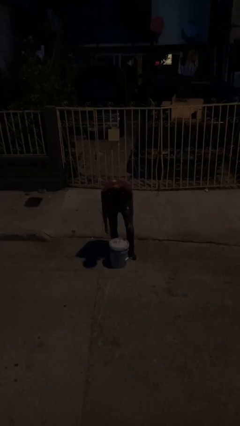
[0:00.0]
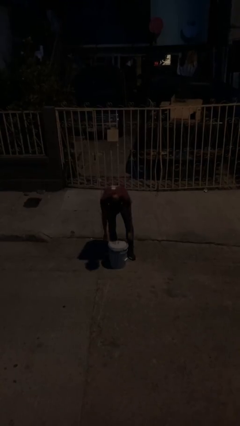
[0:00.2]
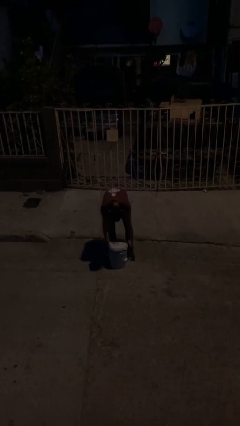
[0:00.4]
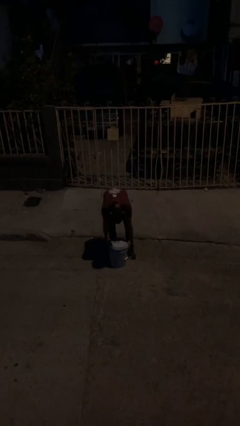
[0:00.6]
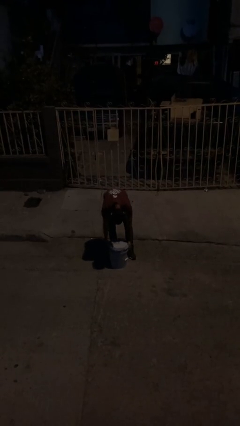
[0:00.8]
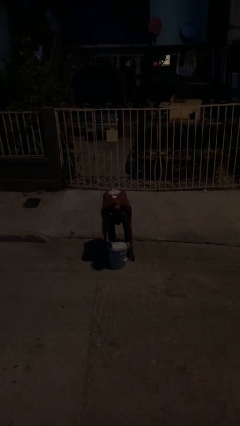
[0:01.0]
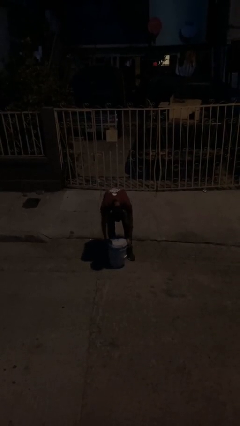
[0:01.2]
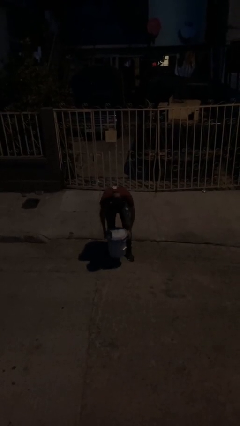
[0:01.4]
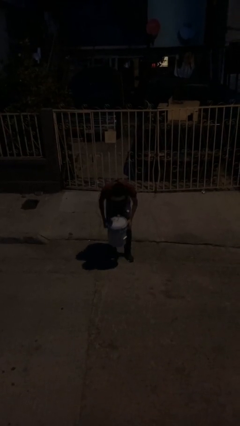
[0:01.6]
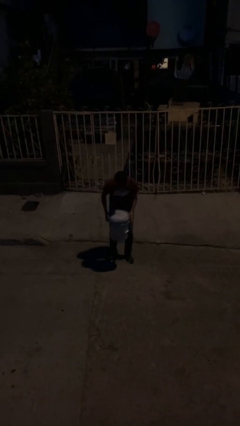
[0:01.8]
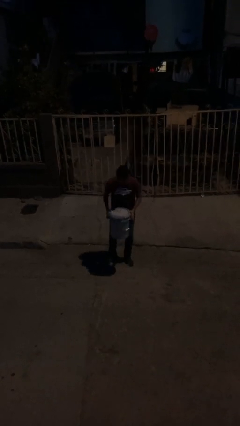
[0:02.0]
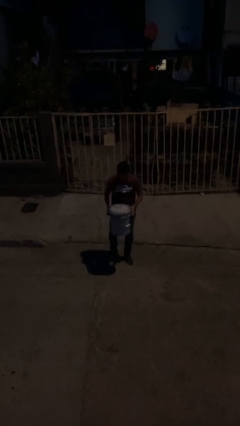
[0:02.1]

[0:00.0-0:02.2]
person picks up object from floor

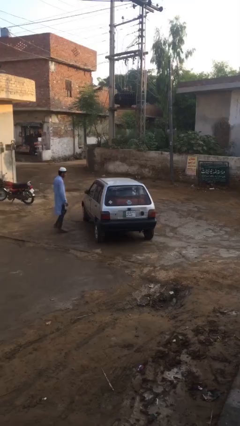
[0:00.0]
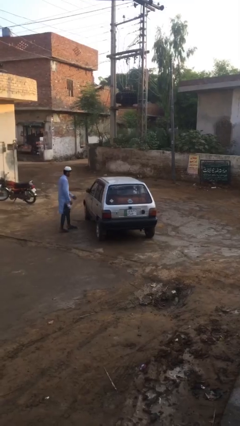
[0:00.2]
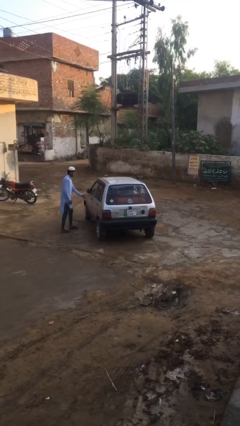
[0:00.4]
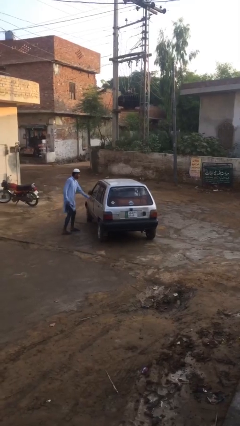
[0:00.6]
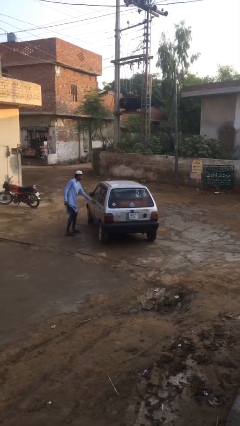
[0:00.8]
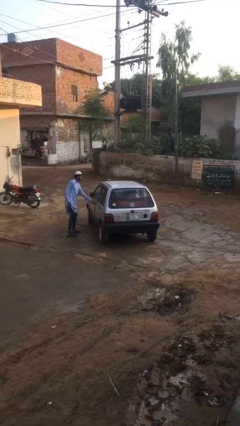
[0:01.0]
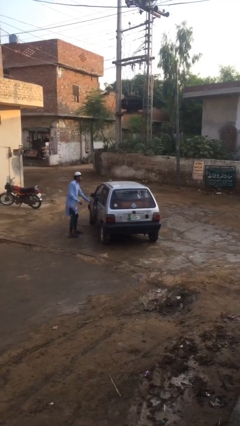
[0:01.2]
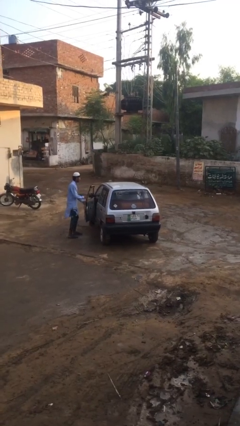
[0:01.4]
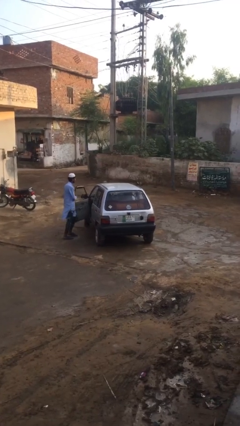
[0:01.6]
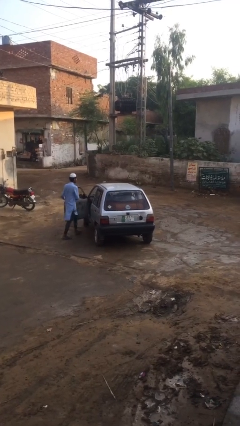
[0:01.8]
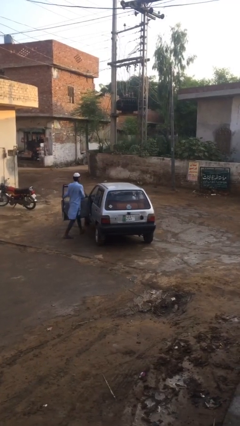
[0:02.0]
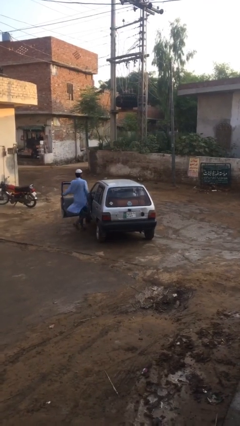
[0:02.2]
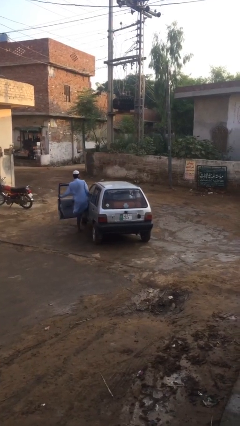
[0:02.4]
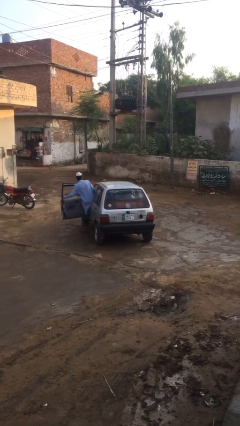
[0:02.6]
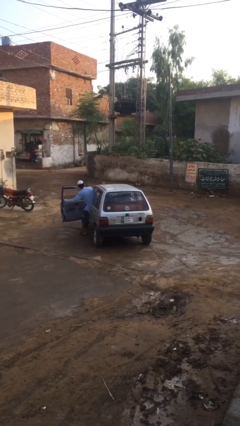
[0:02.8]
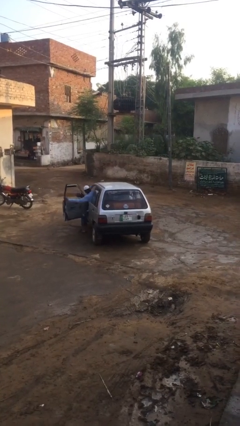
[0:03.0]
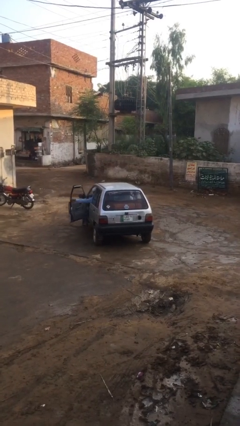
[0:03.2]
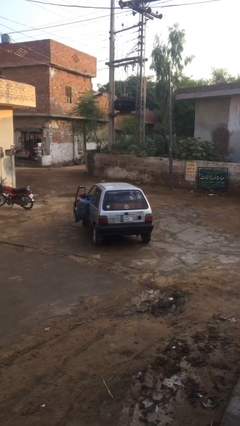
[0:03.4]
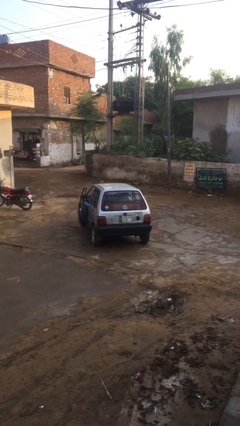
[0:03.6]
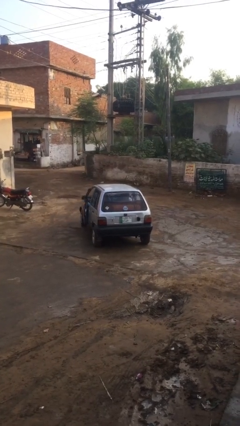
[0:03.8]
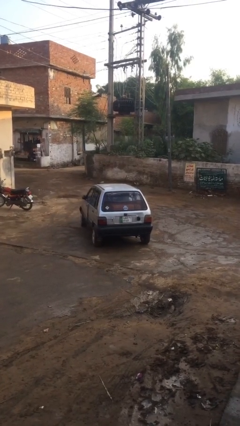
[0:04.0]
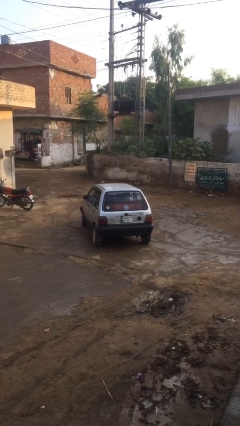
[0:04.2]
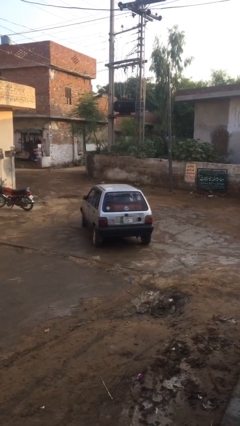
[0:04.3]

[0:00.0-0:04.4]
car picks up person

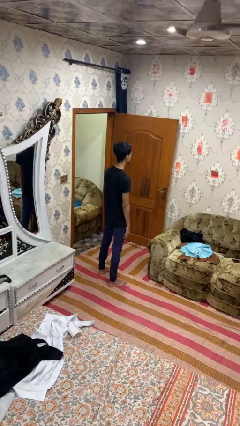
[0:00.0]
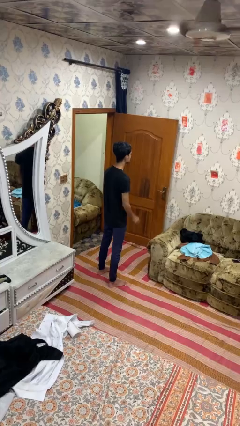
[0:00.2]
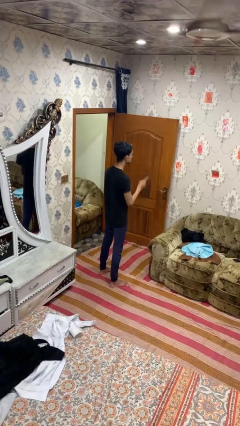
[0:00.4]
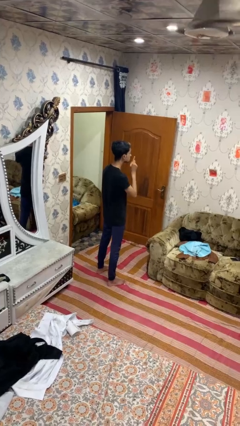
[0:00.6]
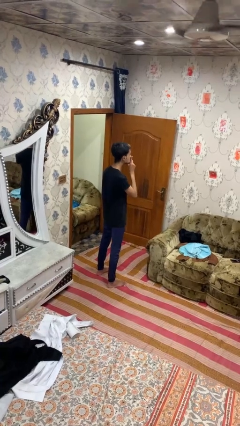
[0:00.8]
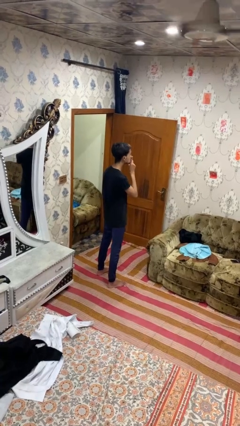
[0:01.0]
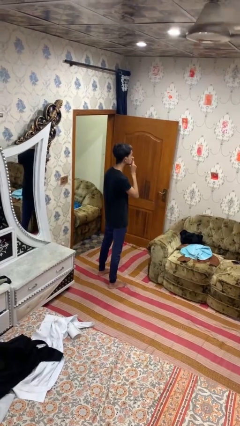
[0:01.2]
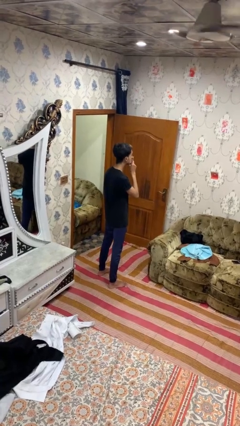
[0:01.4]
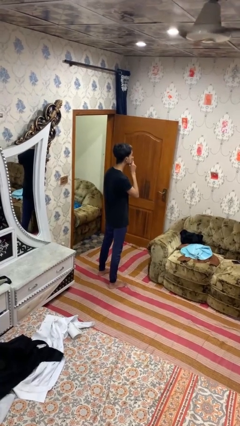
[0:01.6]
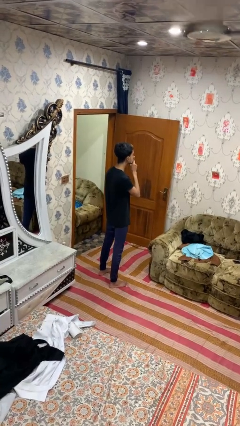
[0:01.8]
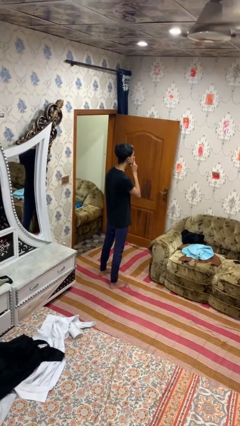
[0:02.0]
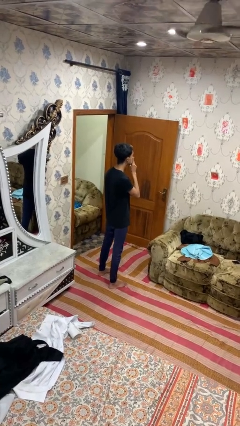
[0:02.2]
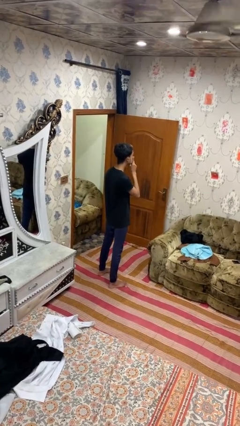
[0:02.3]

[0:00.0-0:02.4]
person gestures be quiet

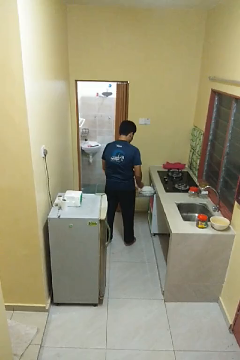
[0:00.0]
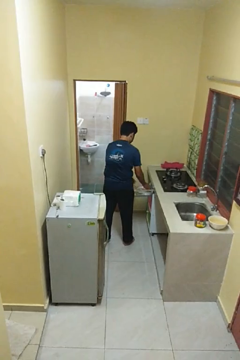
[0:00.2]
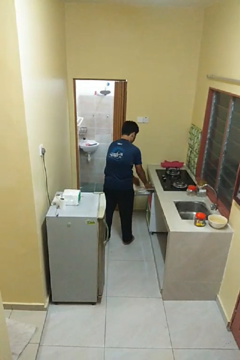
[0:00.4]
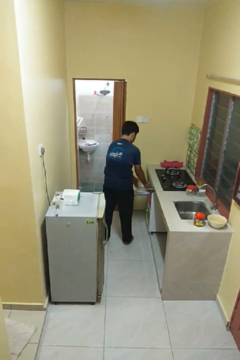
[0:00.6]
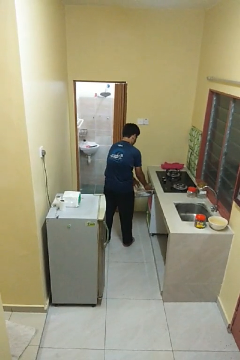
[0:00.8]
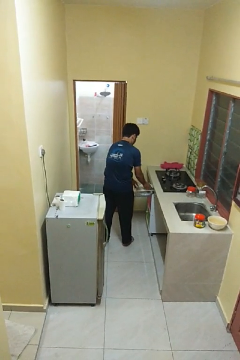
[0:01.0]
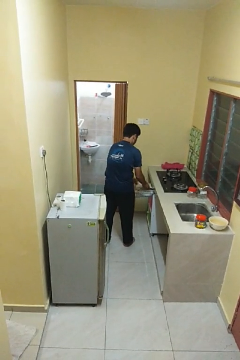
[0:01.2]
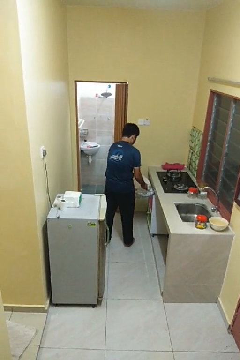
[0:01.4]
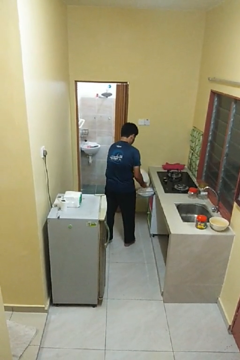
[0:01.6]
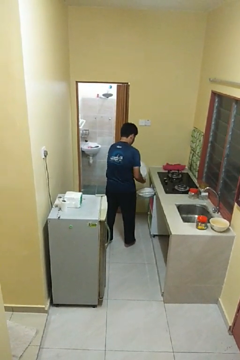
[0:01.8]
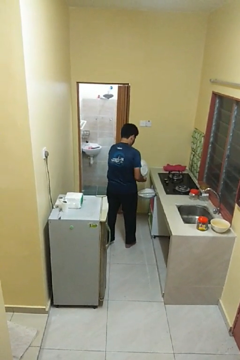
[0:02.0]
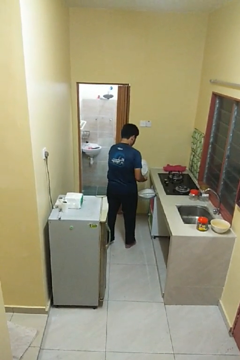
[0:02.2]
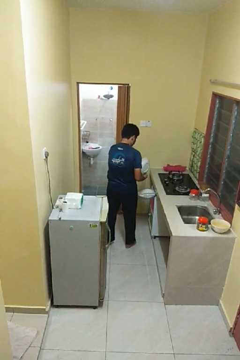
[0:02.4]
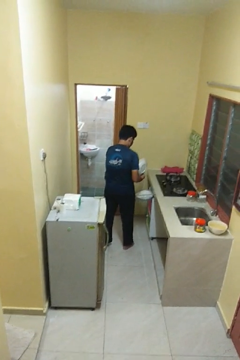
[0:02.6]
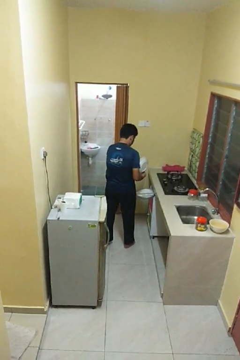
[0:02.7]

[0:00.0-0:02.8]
person takes object from kitchen drawer

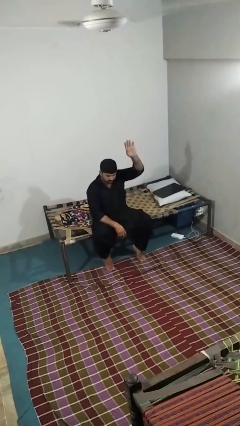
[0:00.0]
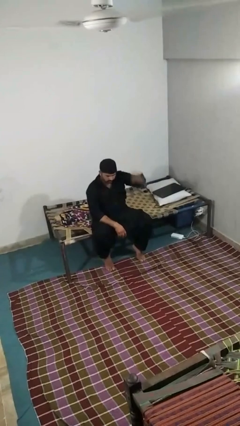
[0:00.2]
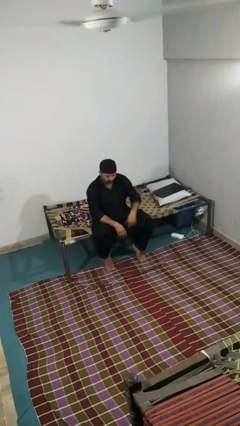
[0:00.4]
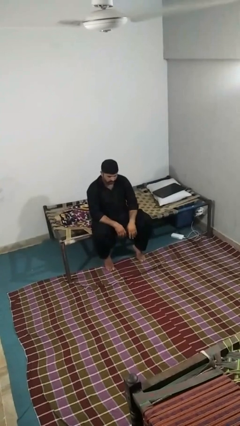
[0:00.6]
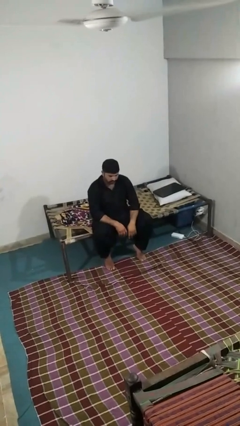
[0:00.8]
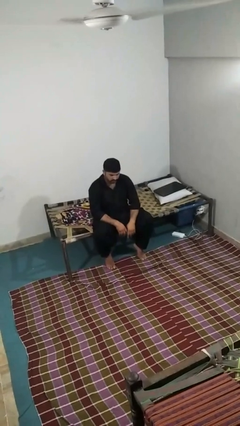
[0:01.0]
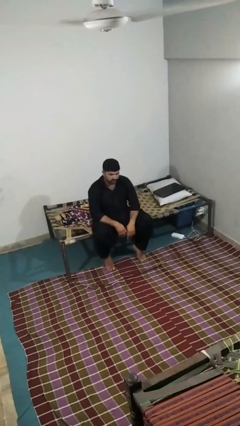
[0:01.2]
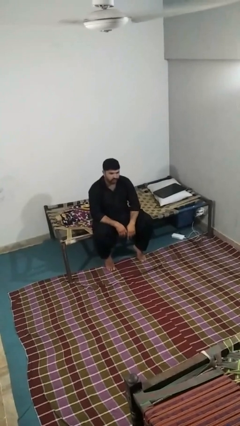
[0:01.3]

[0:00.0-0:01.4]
person gestures lower hand

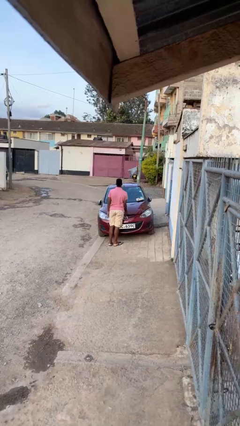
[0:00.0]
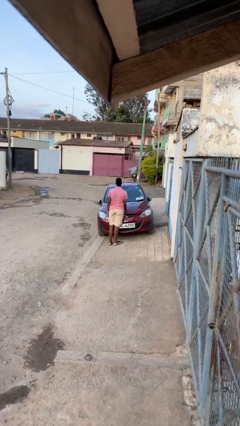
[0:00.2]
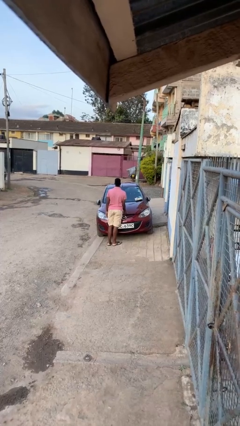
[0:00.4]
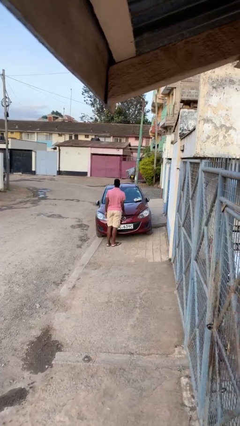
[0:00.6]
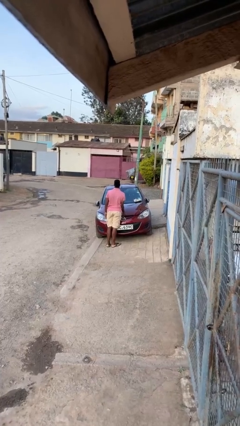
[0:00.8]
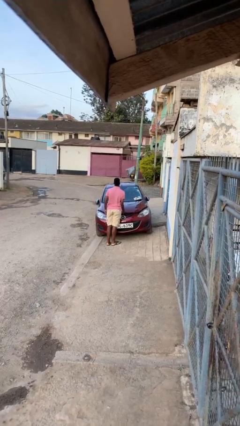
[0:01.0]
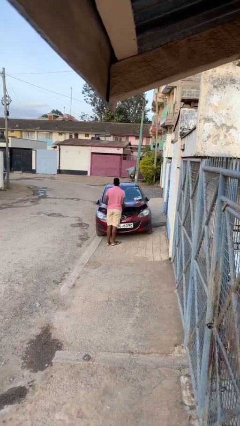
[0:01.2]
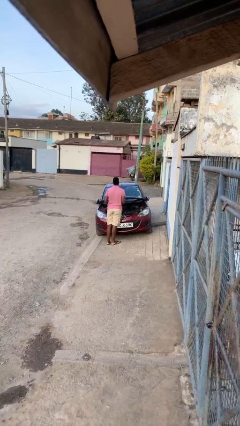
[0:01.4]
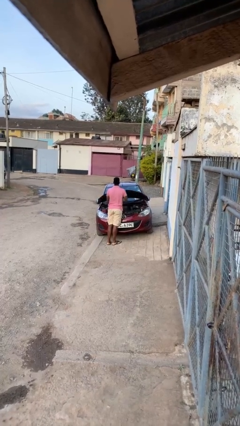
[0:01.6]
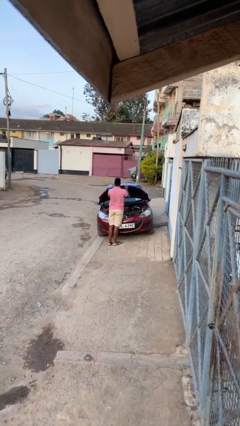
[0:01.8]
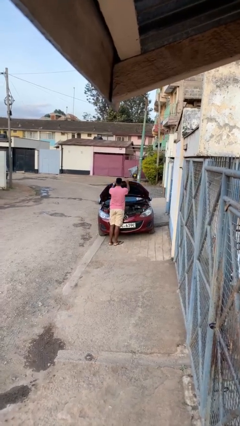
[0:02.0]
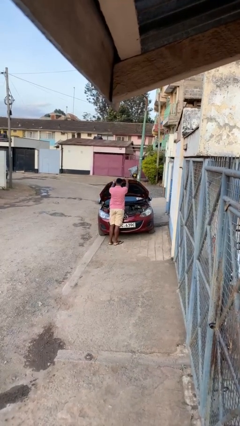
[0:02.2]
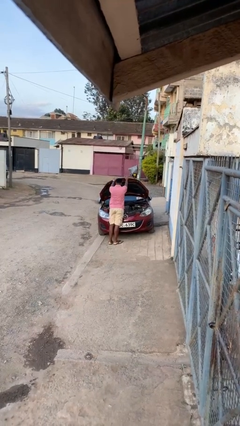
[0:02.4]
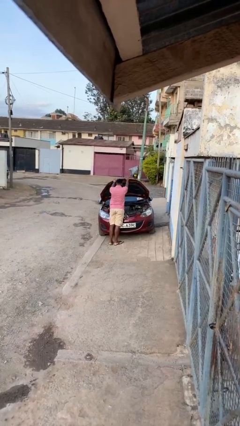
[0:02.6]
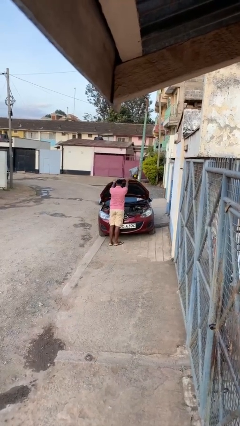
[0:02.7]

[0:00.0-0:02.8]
person opens car hood

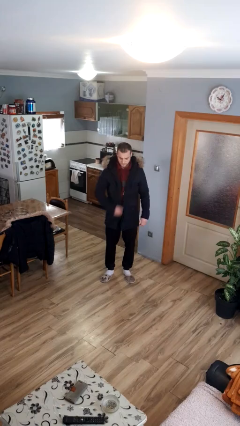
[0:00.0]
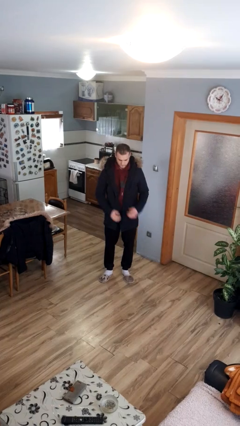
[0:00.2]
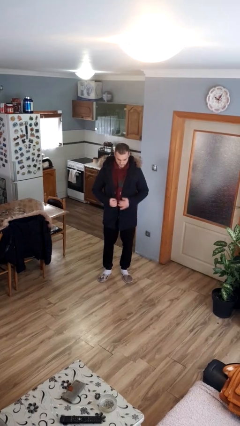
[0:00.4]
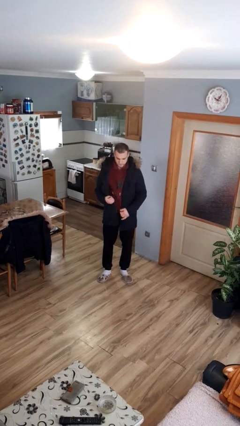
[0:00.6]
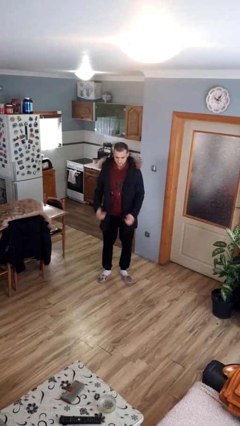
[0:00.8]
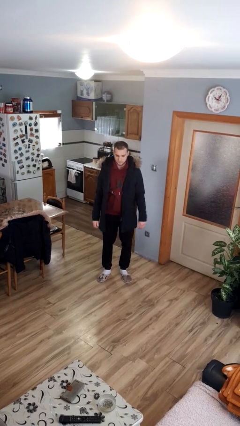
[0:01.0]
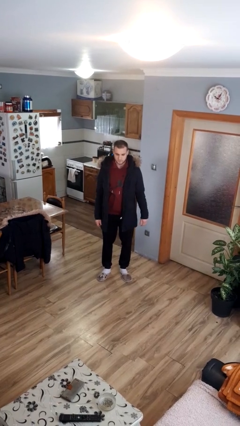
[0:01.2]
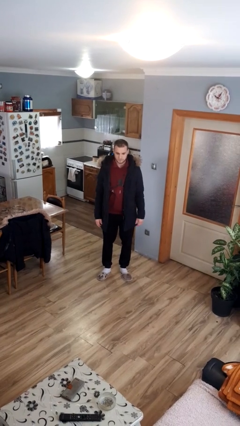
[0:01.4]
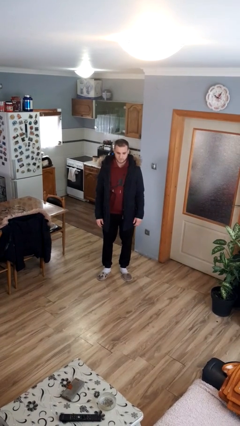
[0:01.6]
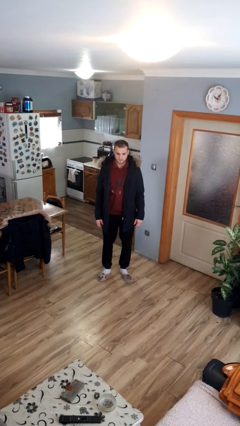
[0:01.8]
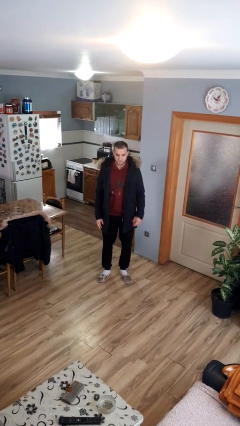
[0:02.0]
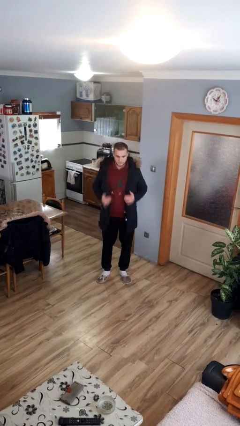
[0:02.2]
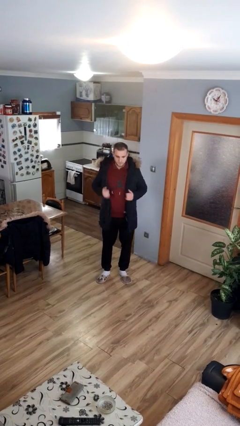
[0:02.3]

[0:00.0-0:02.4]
person unzips jacket
